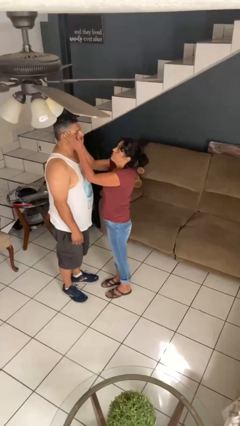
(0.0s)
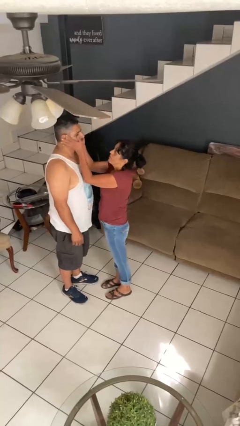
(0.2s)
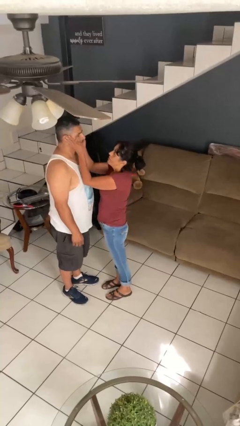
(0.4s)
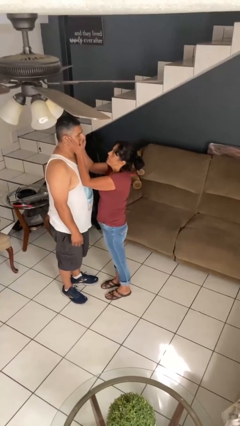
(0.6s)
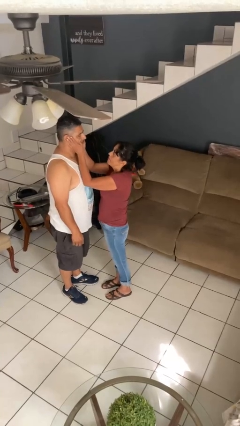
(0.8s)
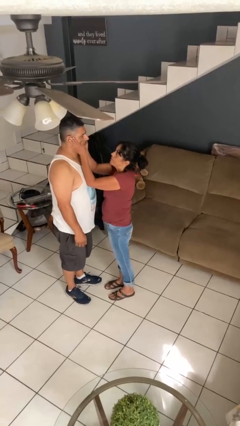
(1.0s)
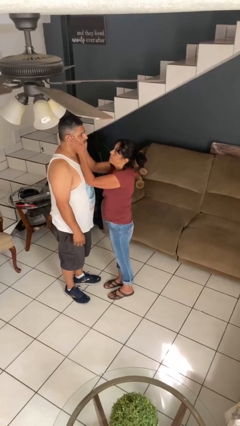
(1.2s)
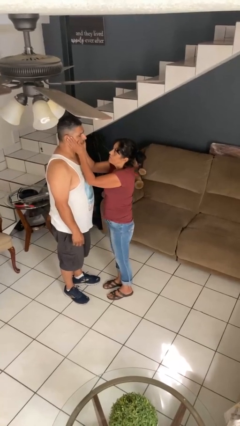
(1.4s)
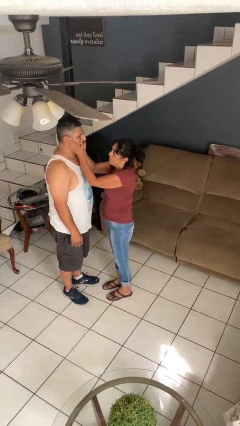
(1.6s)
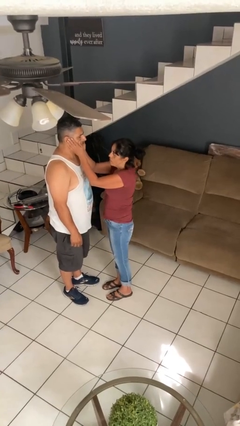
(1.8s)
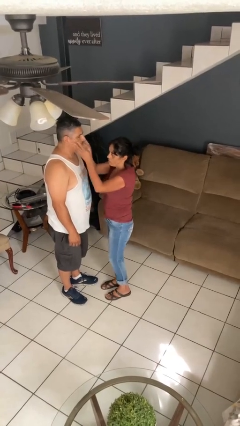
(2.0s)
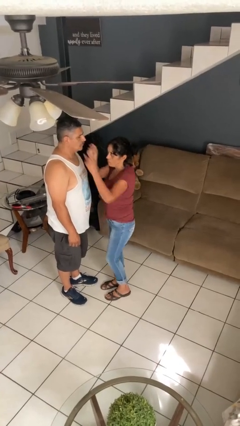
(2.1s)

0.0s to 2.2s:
person touches face of person

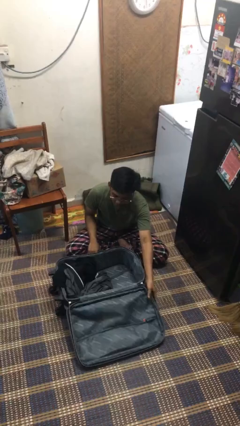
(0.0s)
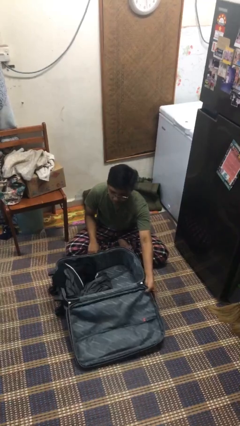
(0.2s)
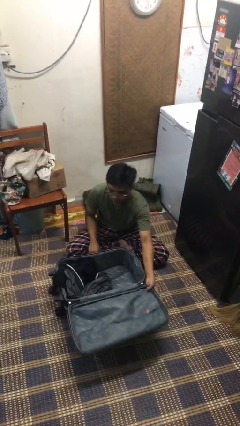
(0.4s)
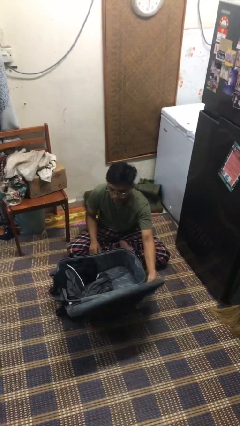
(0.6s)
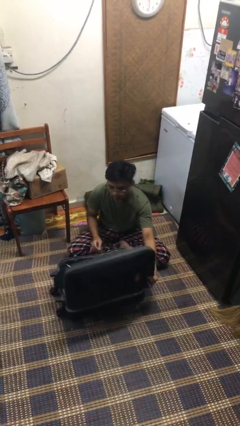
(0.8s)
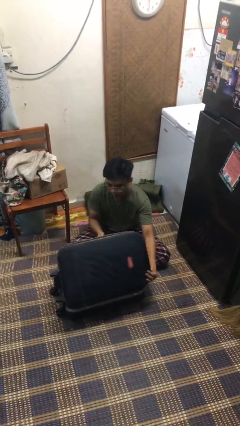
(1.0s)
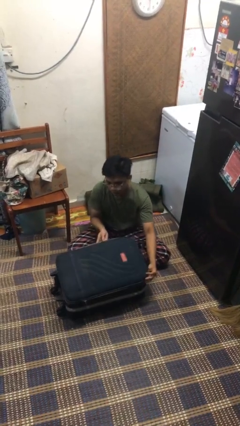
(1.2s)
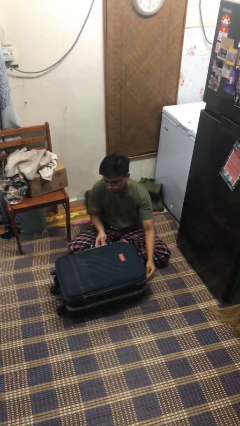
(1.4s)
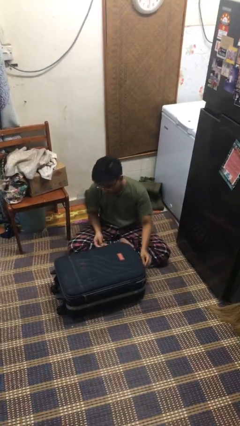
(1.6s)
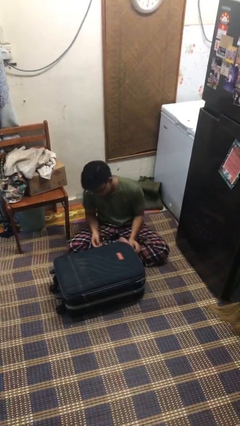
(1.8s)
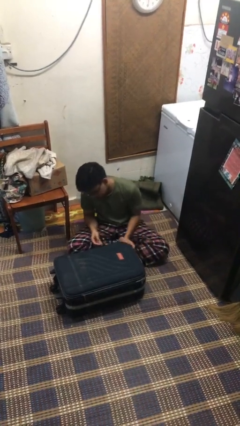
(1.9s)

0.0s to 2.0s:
person closes suitcase

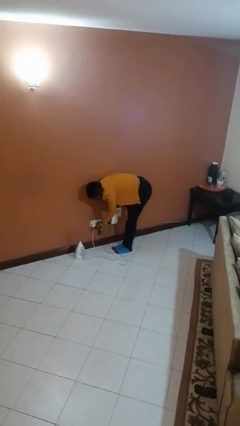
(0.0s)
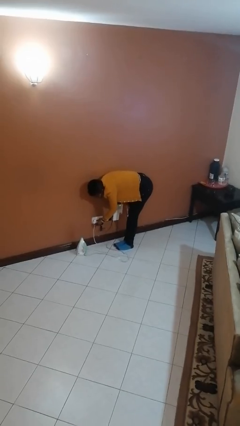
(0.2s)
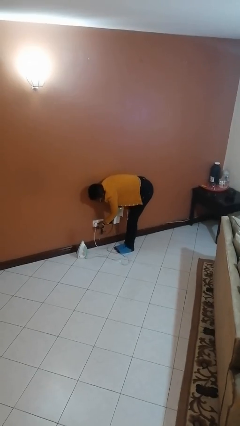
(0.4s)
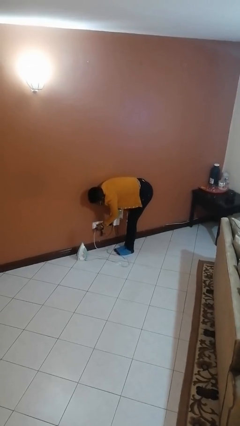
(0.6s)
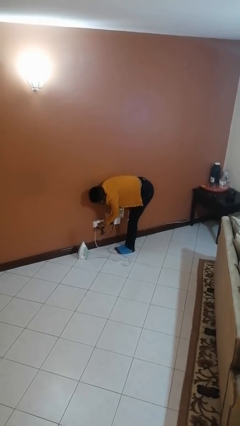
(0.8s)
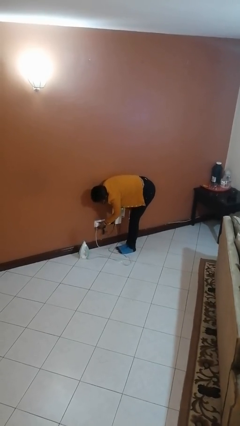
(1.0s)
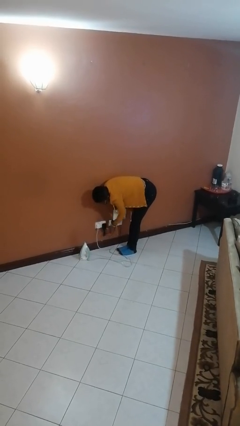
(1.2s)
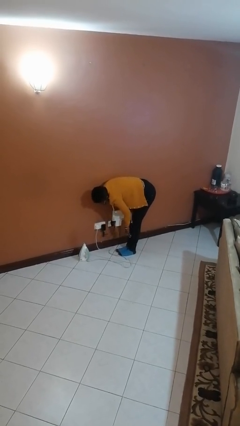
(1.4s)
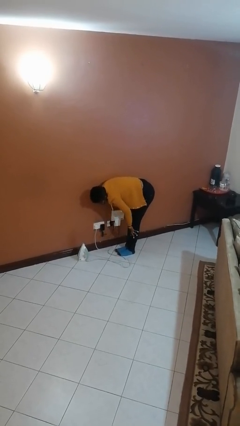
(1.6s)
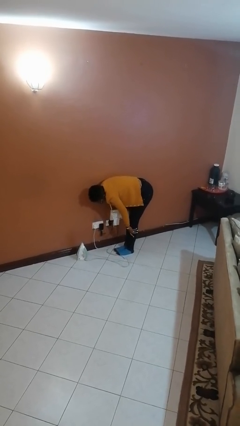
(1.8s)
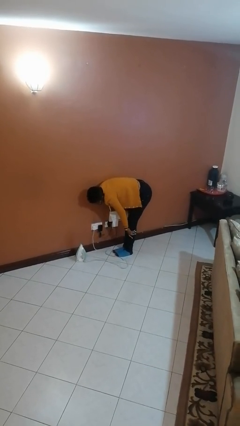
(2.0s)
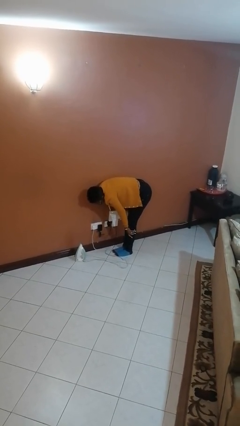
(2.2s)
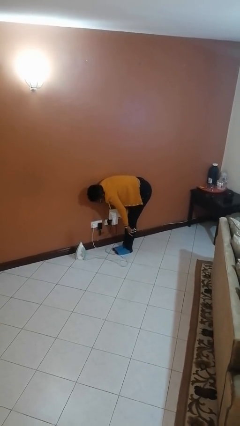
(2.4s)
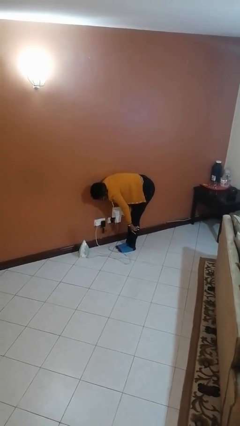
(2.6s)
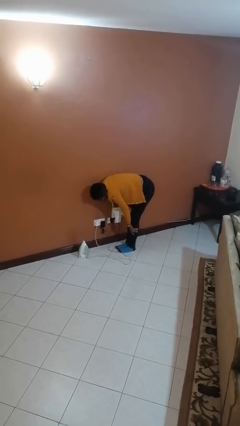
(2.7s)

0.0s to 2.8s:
person plugs into electrical socket

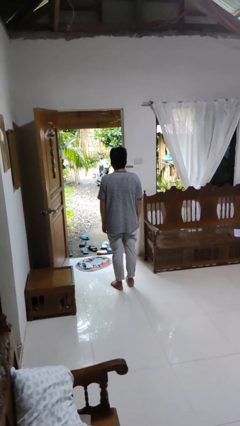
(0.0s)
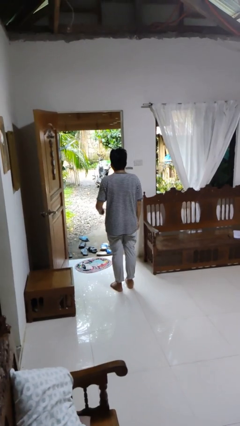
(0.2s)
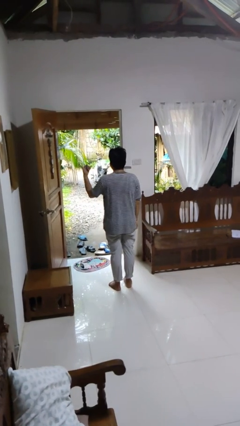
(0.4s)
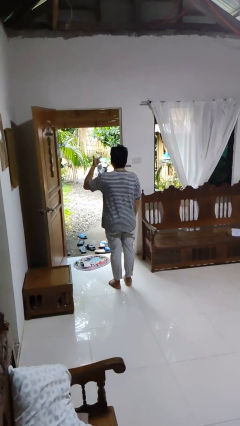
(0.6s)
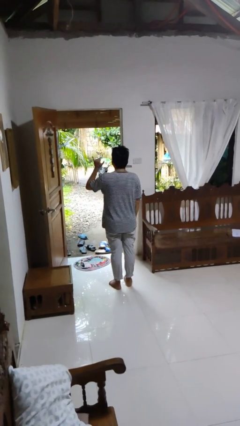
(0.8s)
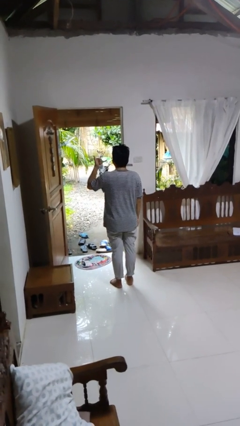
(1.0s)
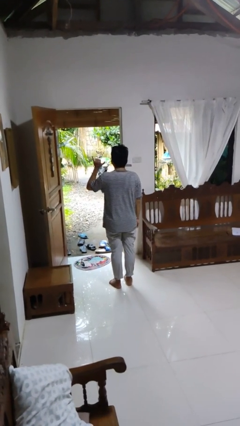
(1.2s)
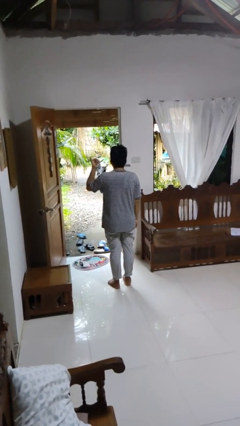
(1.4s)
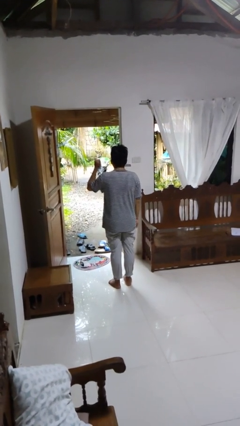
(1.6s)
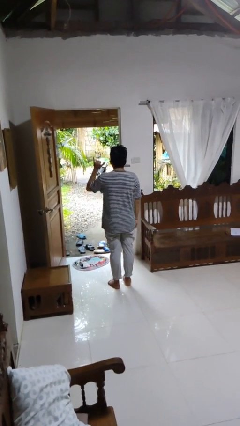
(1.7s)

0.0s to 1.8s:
person gestures hang loose

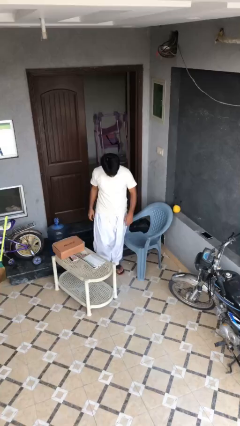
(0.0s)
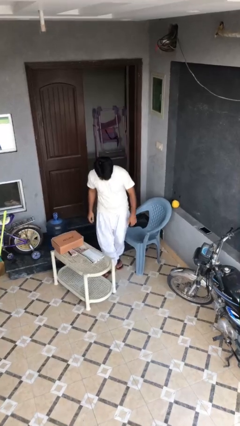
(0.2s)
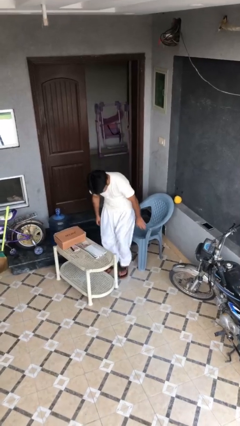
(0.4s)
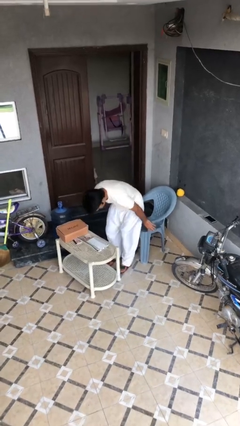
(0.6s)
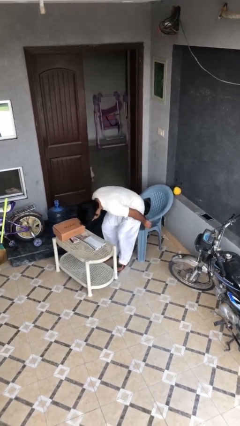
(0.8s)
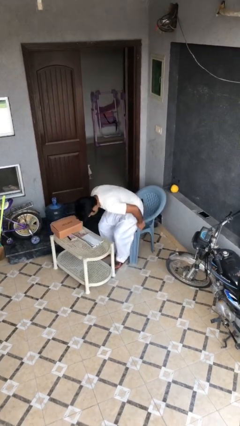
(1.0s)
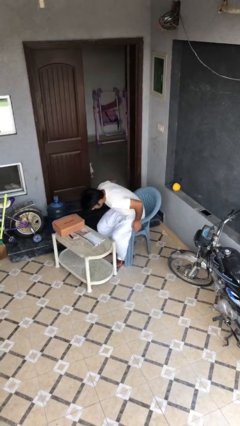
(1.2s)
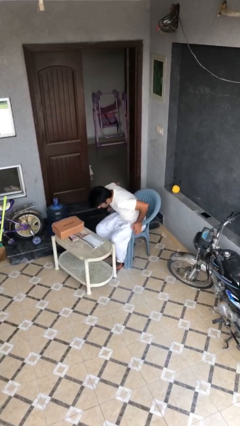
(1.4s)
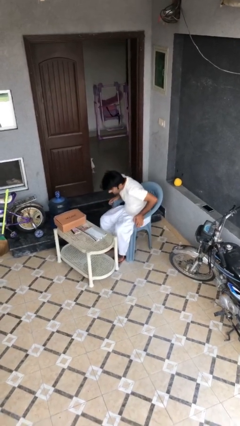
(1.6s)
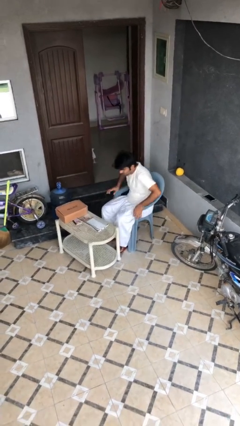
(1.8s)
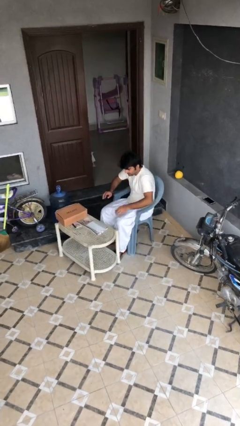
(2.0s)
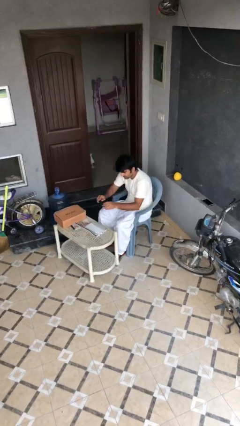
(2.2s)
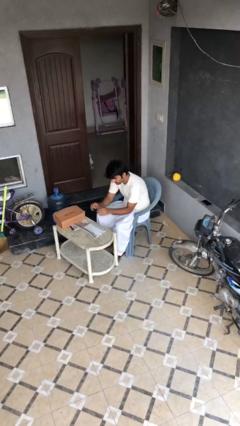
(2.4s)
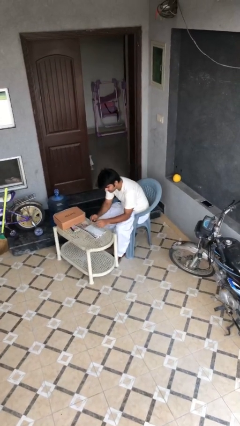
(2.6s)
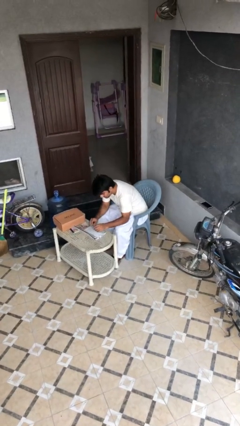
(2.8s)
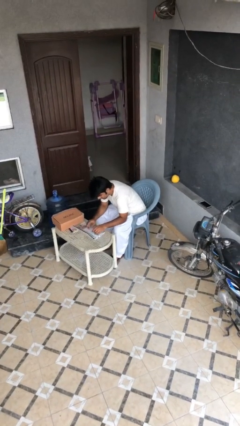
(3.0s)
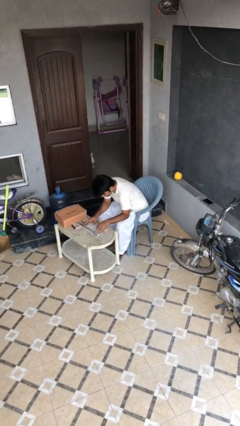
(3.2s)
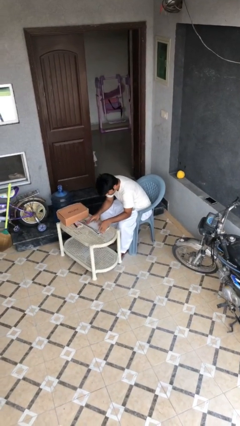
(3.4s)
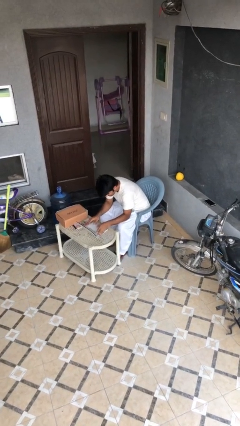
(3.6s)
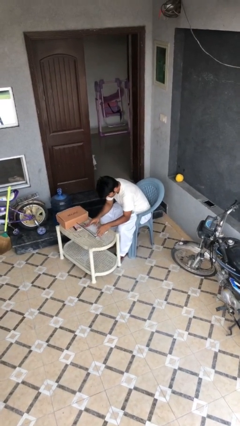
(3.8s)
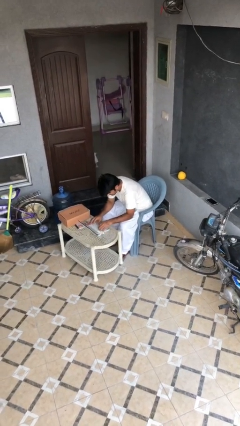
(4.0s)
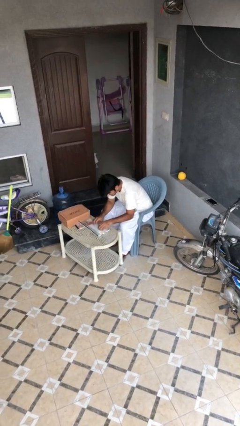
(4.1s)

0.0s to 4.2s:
person sits down

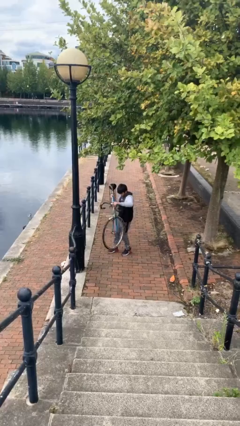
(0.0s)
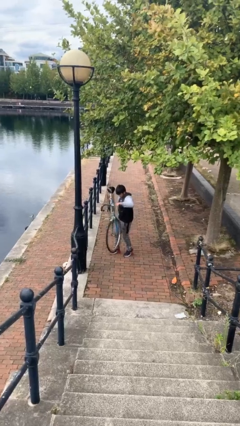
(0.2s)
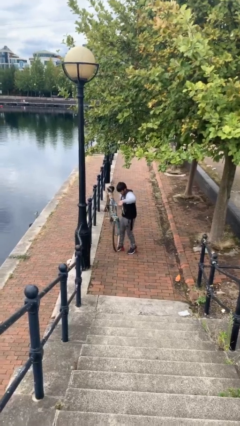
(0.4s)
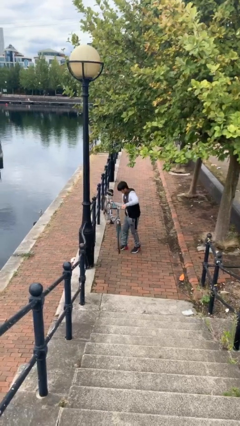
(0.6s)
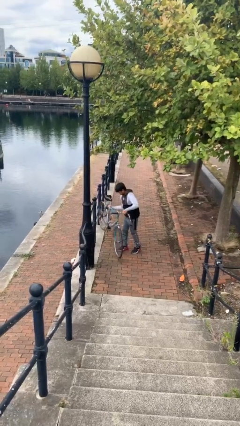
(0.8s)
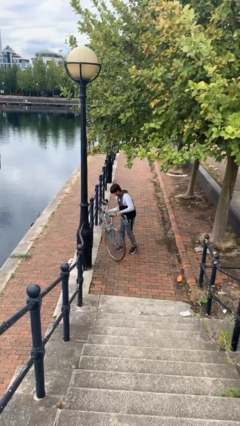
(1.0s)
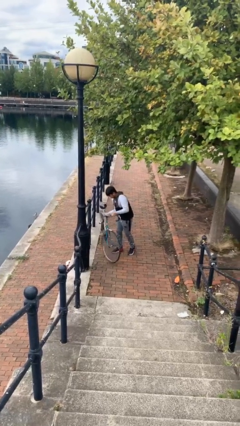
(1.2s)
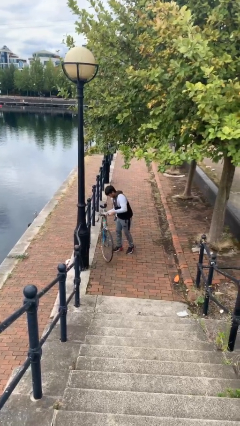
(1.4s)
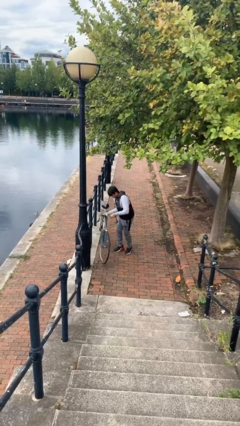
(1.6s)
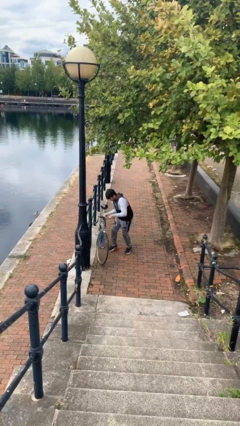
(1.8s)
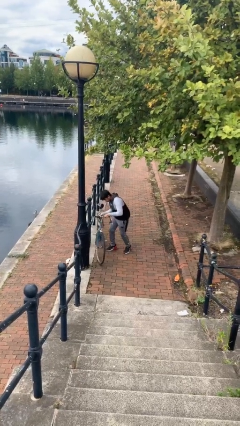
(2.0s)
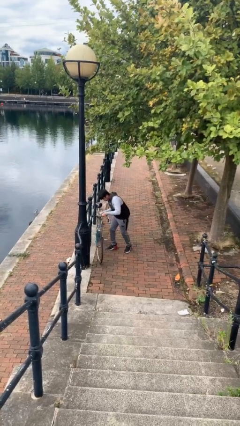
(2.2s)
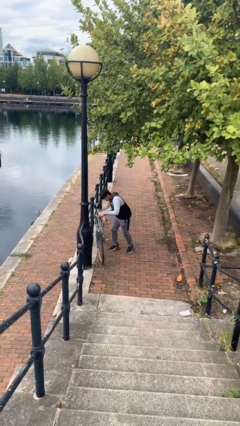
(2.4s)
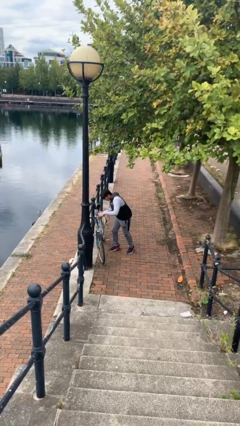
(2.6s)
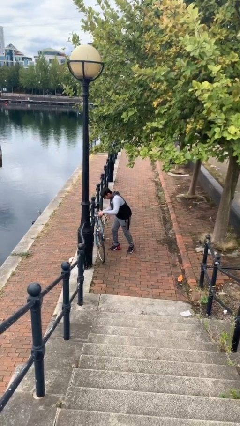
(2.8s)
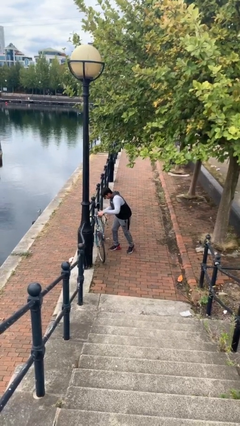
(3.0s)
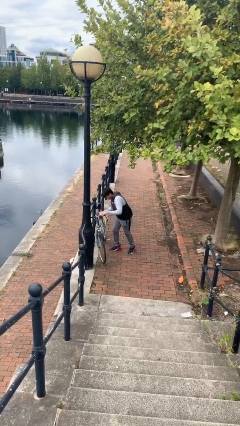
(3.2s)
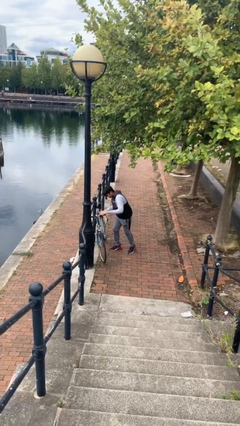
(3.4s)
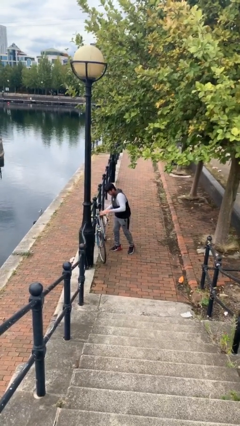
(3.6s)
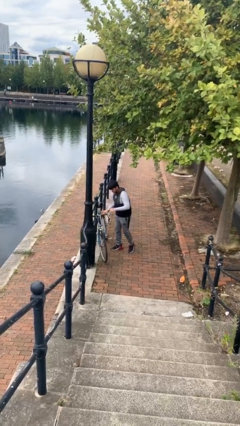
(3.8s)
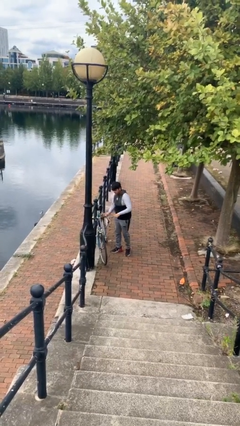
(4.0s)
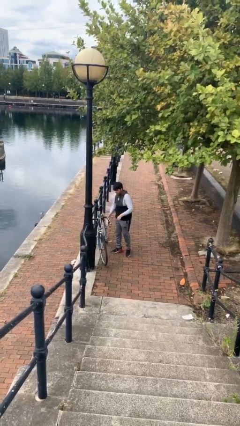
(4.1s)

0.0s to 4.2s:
person puts down object on floor
